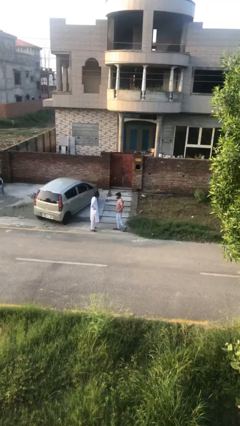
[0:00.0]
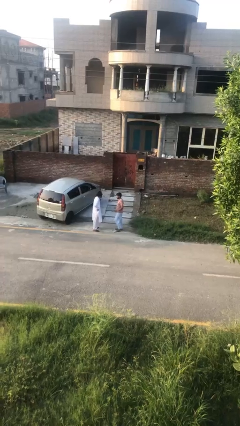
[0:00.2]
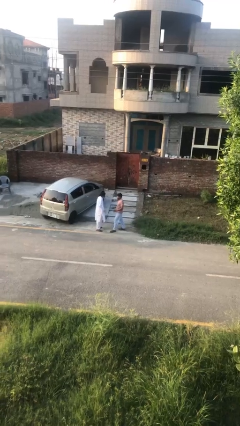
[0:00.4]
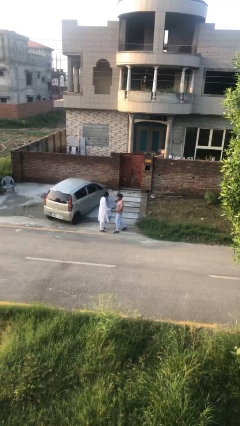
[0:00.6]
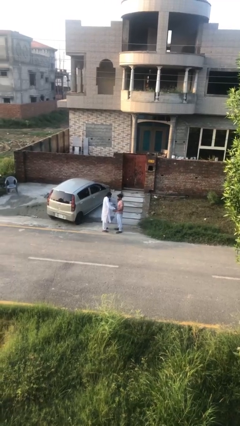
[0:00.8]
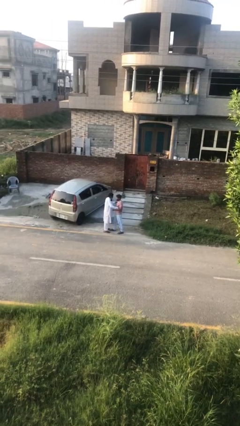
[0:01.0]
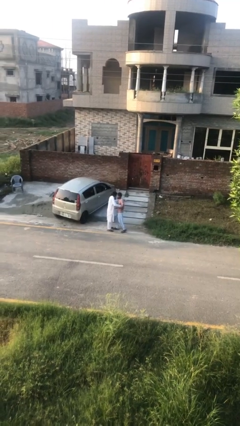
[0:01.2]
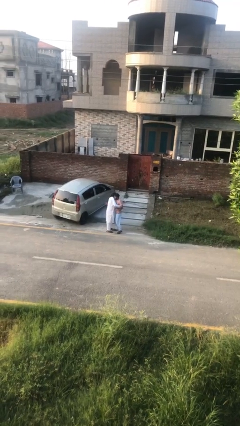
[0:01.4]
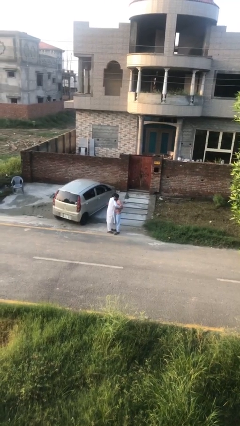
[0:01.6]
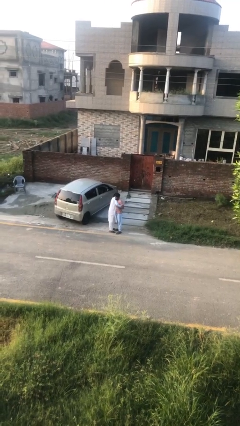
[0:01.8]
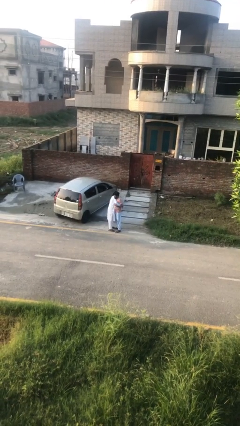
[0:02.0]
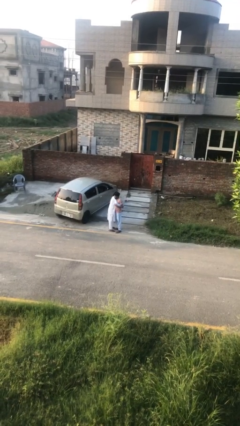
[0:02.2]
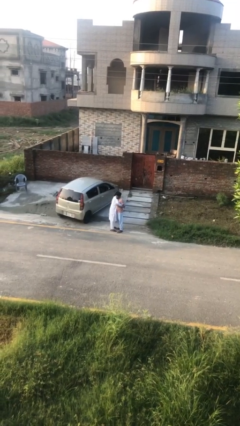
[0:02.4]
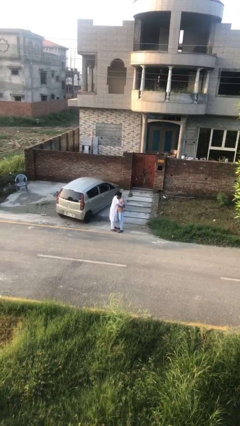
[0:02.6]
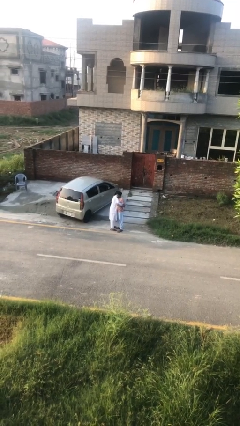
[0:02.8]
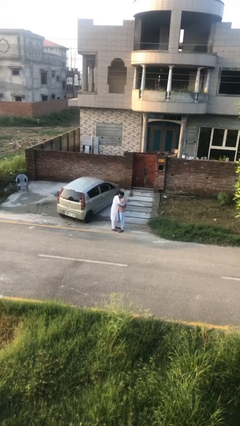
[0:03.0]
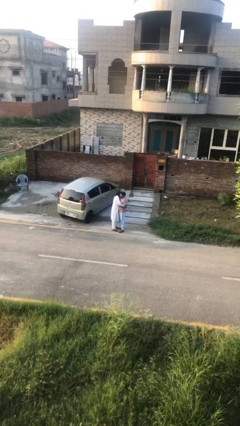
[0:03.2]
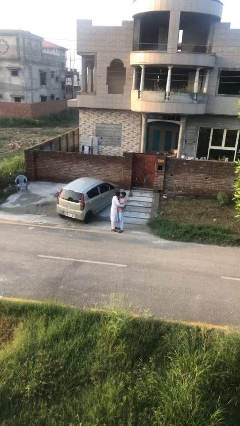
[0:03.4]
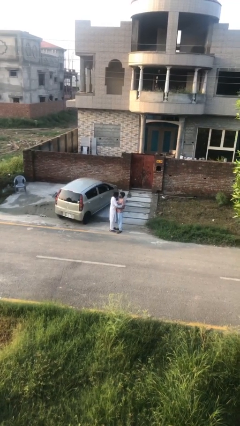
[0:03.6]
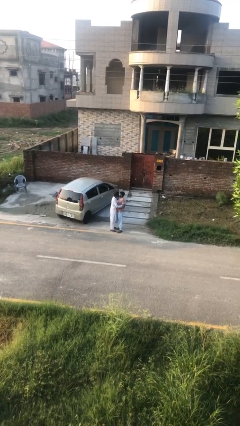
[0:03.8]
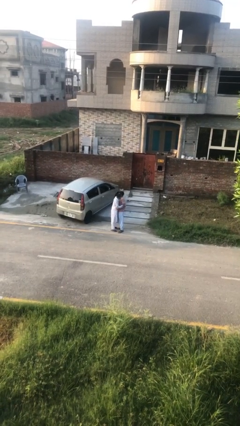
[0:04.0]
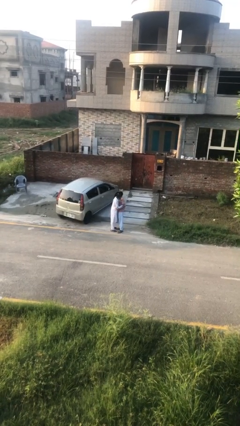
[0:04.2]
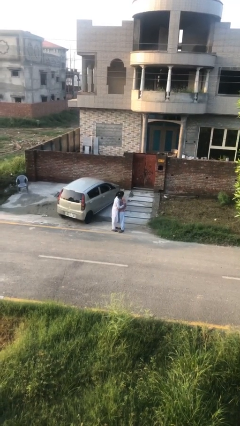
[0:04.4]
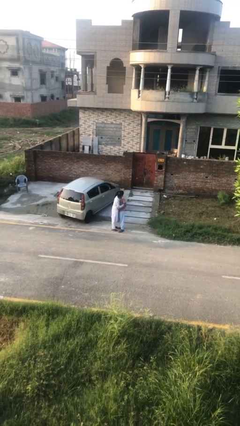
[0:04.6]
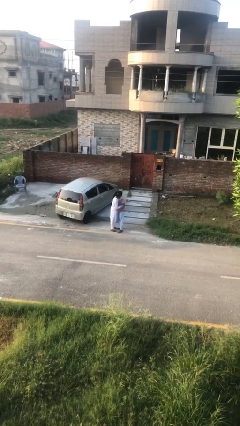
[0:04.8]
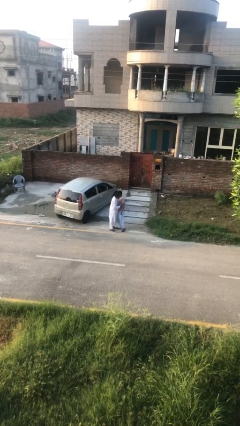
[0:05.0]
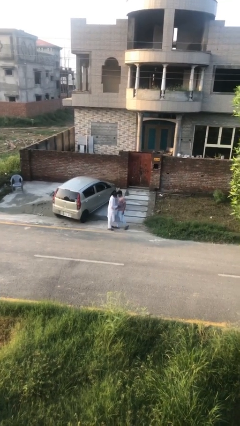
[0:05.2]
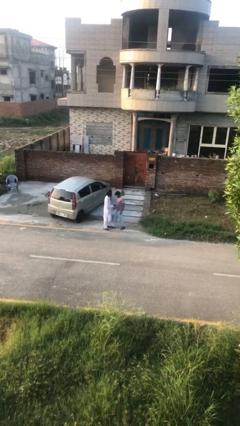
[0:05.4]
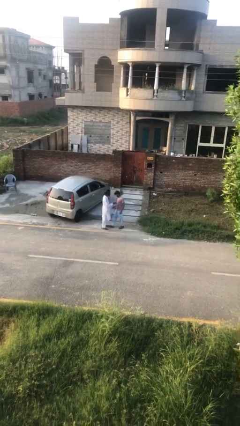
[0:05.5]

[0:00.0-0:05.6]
person embraces person

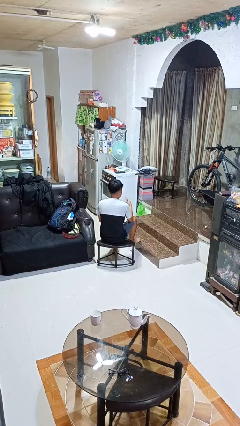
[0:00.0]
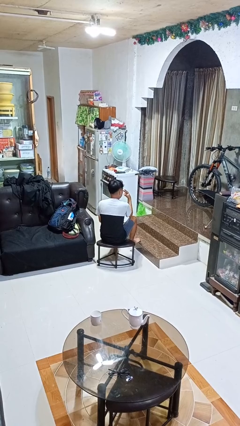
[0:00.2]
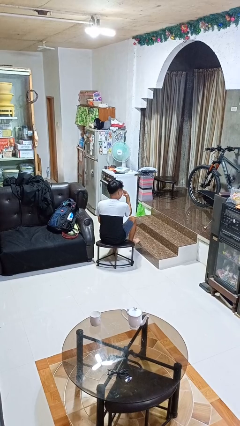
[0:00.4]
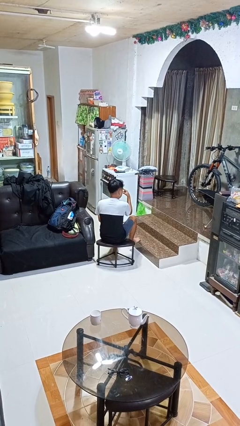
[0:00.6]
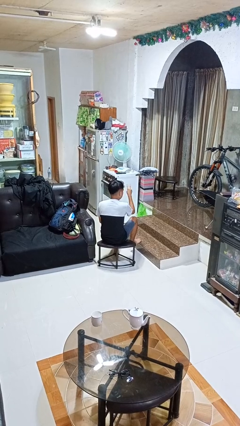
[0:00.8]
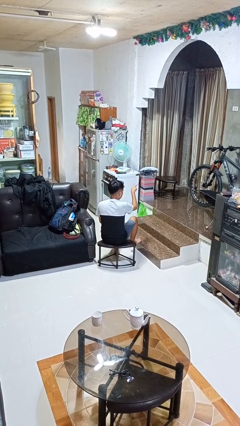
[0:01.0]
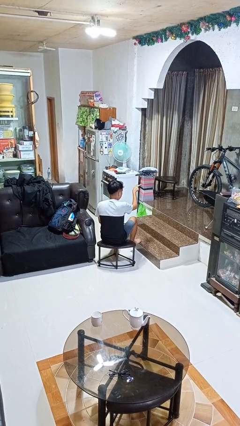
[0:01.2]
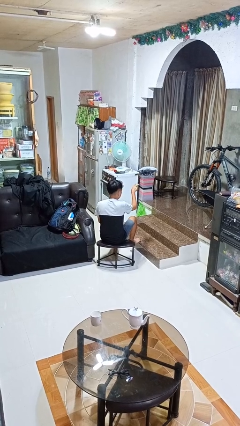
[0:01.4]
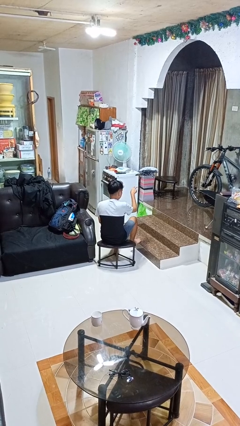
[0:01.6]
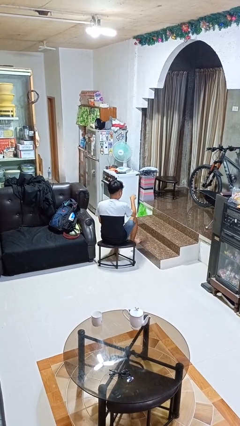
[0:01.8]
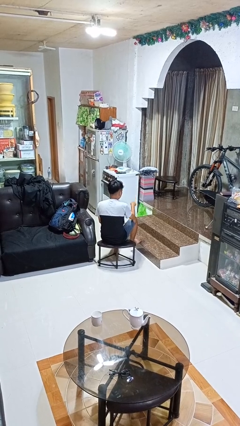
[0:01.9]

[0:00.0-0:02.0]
person gestures watch closely

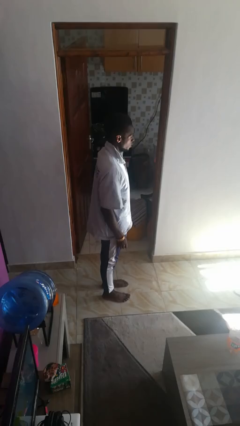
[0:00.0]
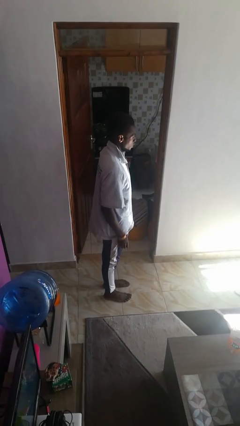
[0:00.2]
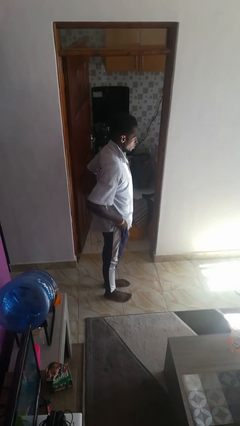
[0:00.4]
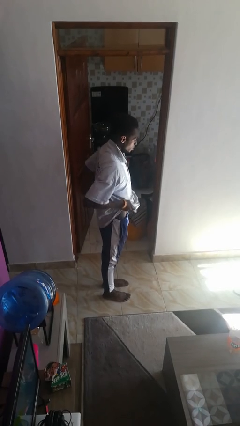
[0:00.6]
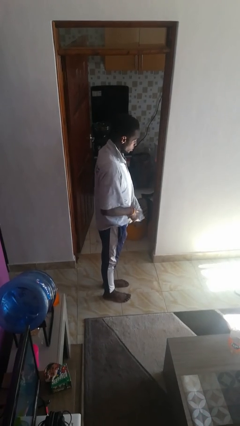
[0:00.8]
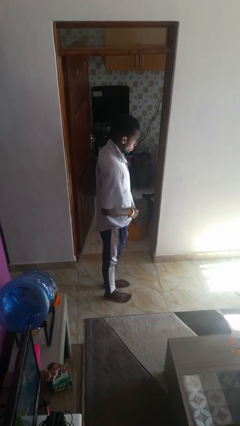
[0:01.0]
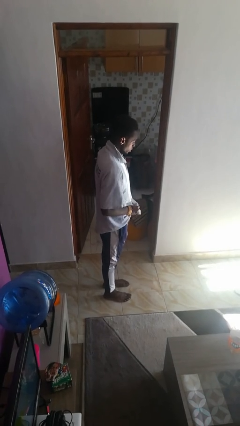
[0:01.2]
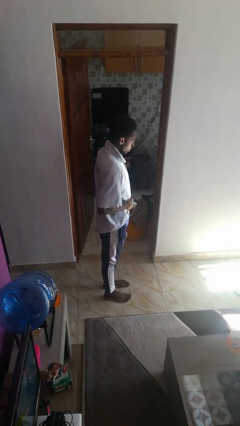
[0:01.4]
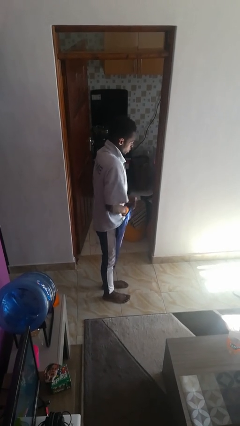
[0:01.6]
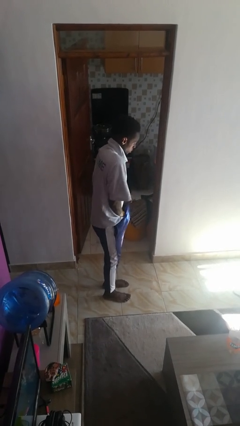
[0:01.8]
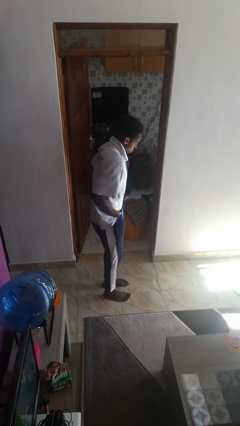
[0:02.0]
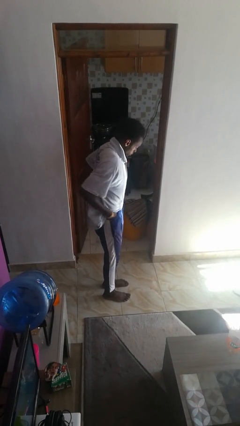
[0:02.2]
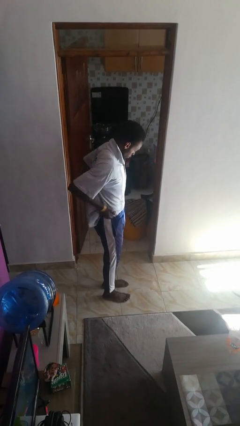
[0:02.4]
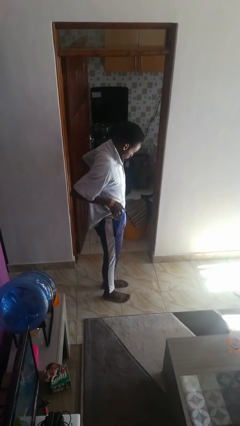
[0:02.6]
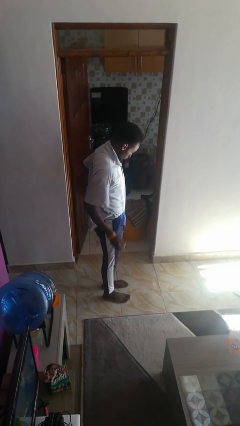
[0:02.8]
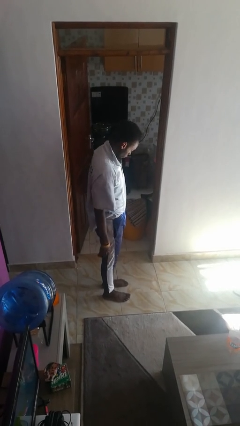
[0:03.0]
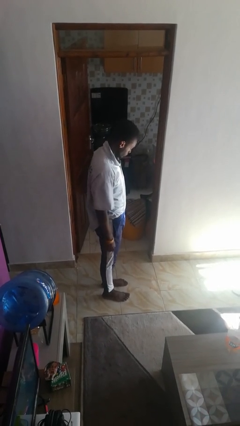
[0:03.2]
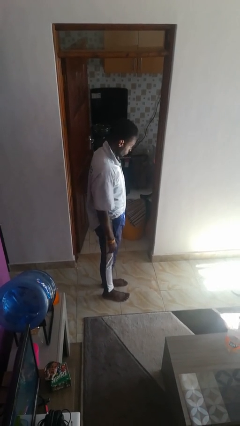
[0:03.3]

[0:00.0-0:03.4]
person tucks in shirt

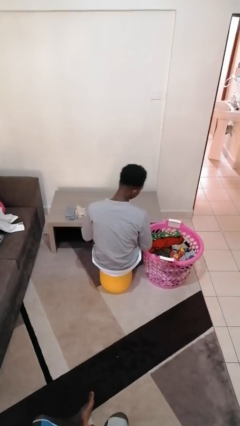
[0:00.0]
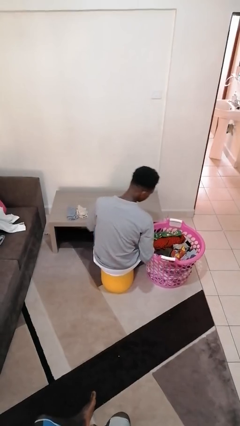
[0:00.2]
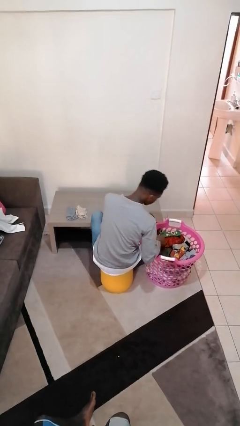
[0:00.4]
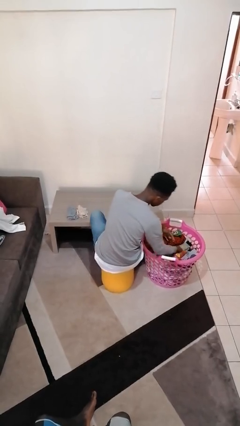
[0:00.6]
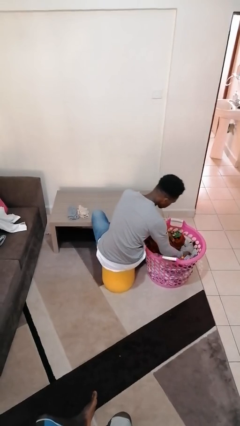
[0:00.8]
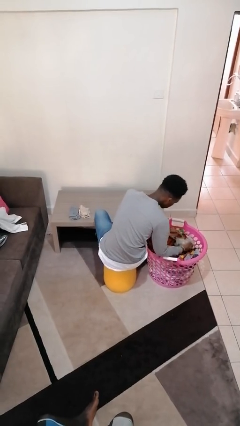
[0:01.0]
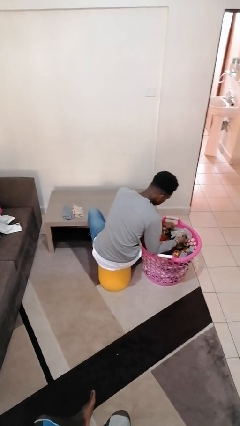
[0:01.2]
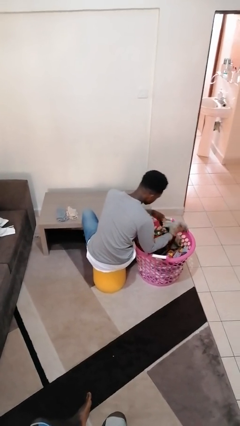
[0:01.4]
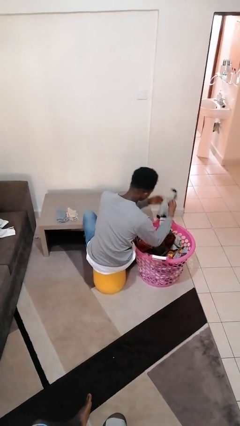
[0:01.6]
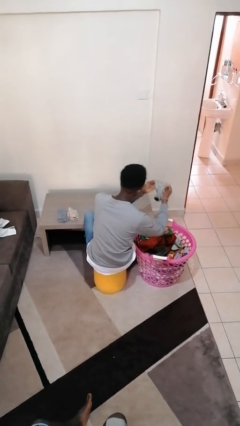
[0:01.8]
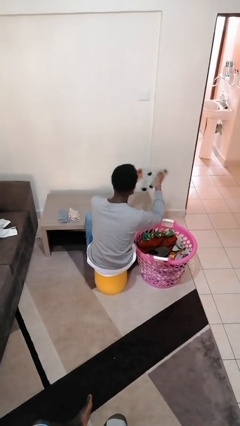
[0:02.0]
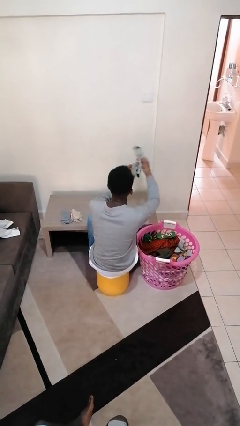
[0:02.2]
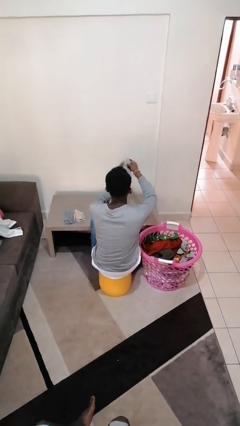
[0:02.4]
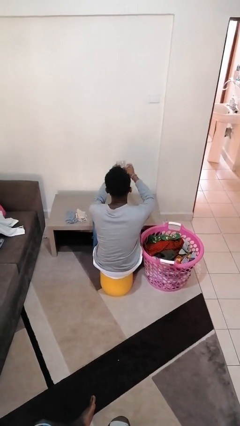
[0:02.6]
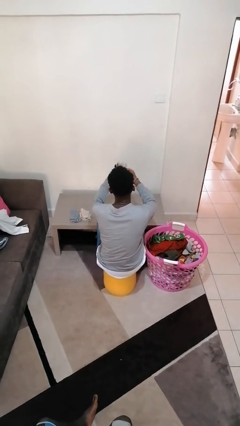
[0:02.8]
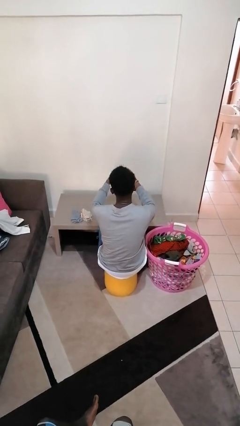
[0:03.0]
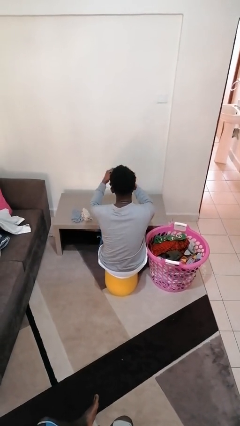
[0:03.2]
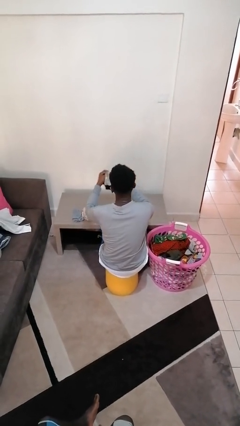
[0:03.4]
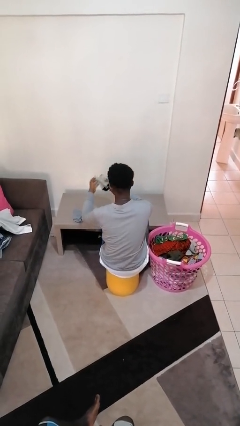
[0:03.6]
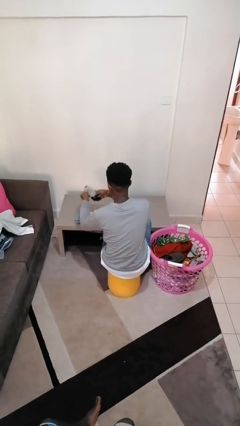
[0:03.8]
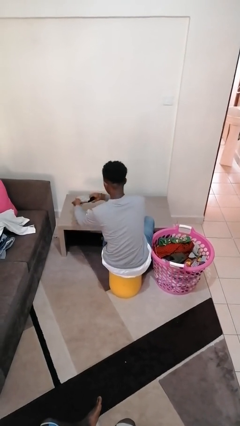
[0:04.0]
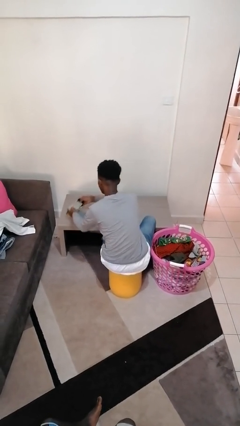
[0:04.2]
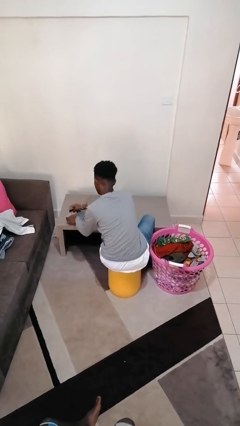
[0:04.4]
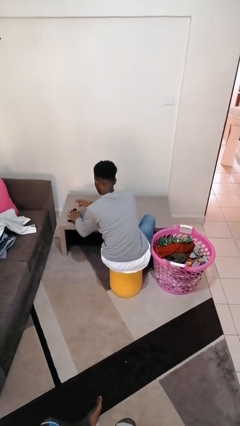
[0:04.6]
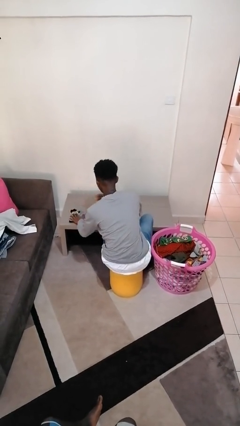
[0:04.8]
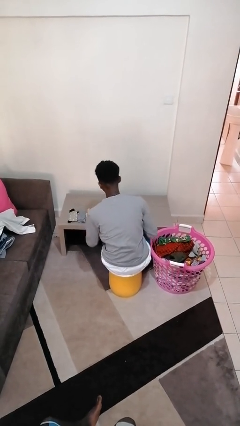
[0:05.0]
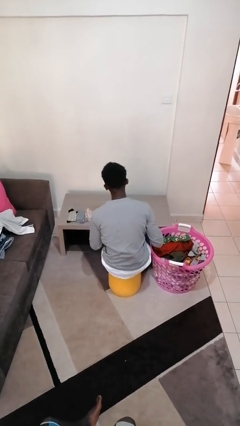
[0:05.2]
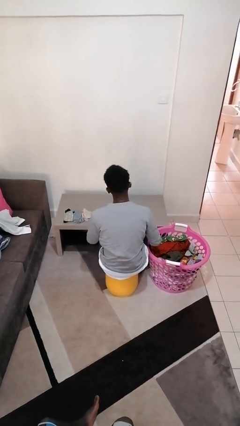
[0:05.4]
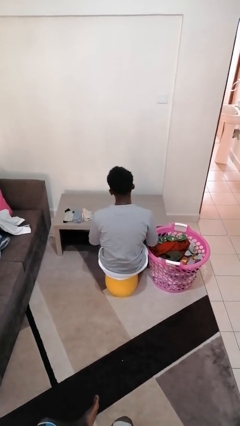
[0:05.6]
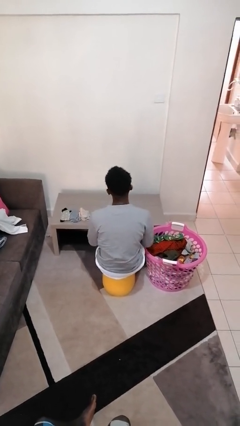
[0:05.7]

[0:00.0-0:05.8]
person folds socks

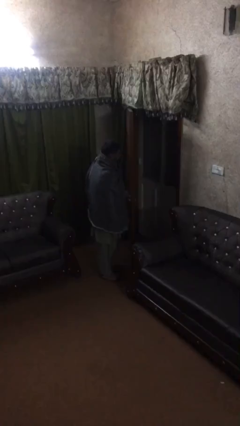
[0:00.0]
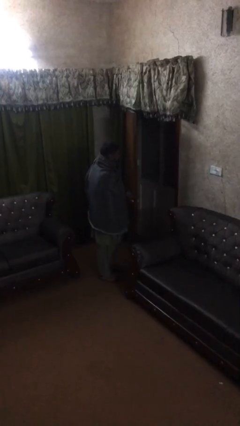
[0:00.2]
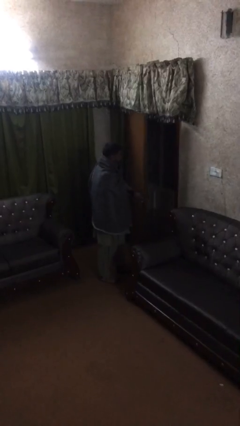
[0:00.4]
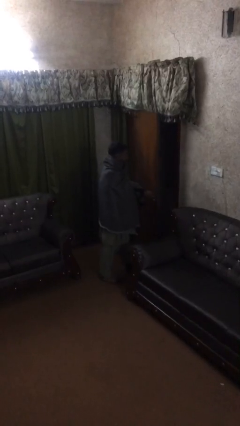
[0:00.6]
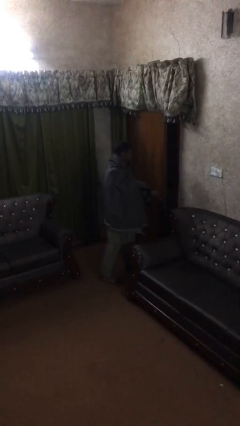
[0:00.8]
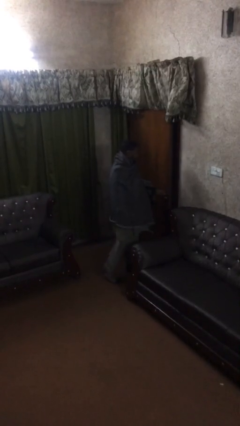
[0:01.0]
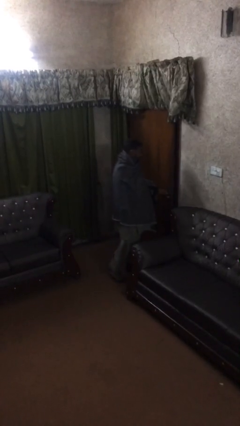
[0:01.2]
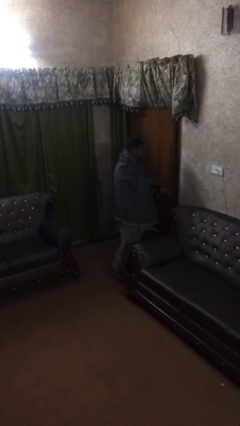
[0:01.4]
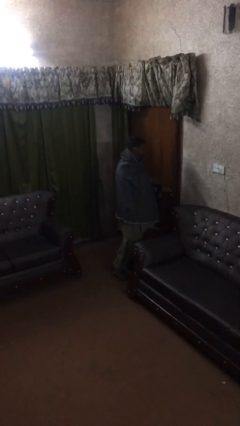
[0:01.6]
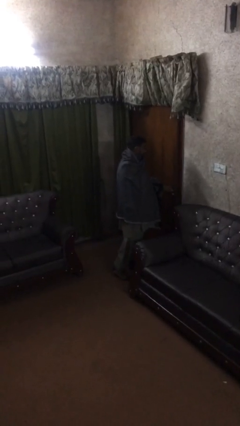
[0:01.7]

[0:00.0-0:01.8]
person closes facility door
